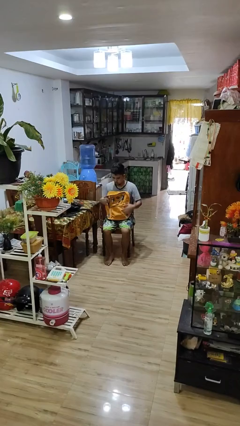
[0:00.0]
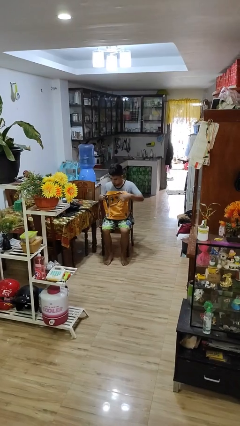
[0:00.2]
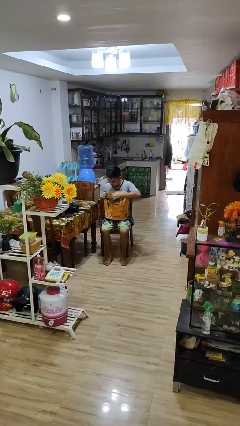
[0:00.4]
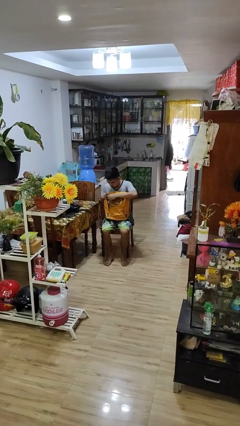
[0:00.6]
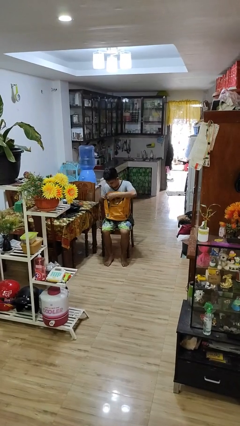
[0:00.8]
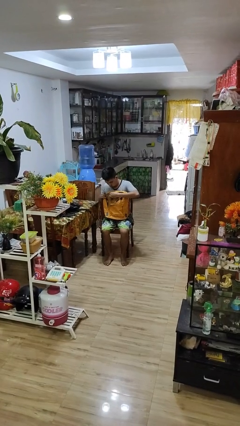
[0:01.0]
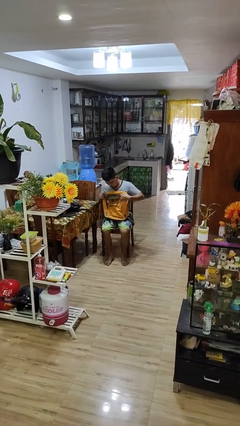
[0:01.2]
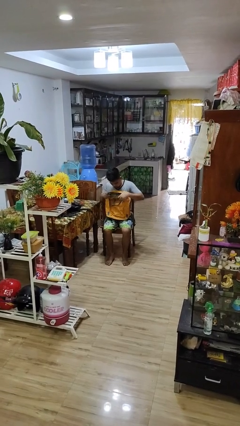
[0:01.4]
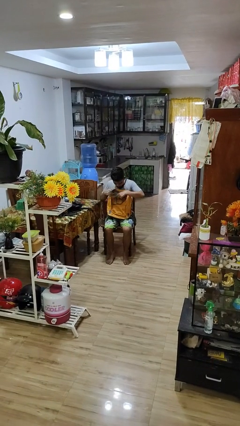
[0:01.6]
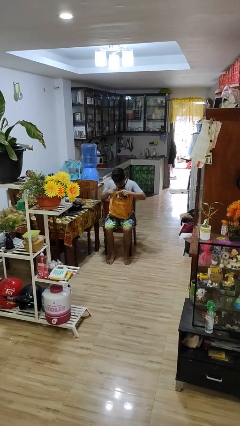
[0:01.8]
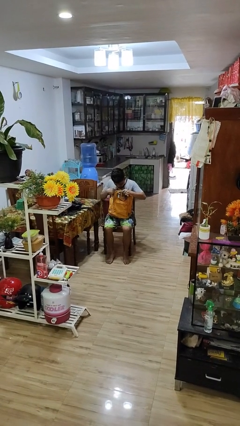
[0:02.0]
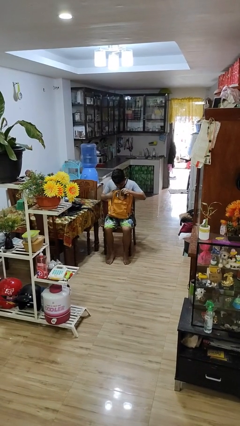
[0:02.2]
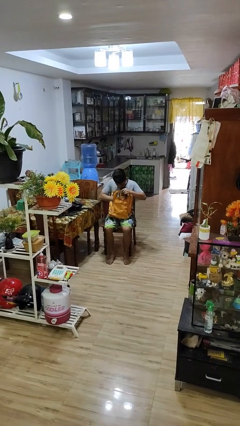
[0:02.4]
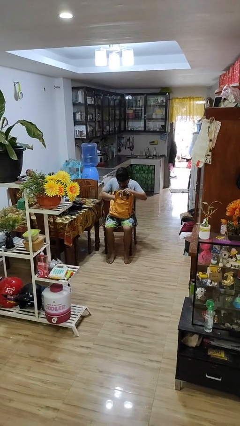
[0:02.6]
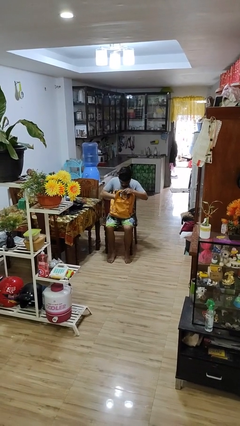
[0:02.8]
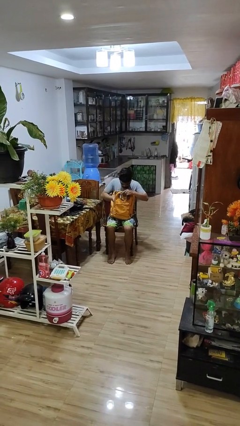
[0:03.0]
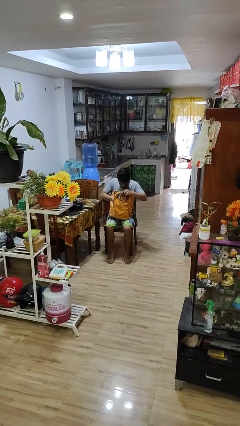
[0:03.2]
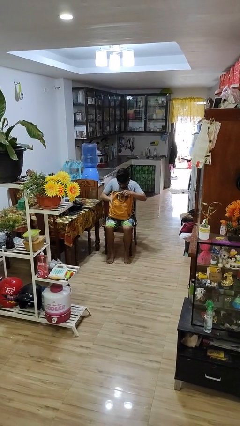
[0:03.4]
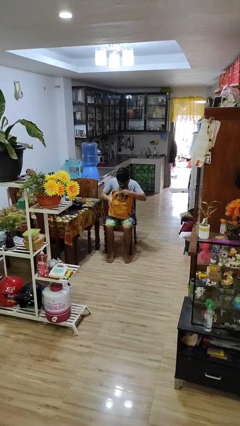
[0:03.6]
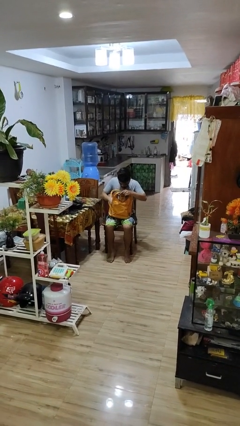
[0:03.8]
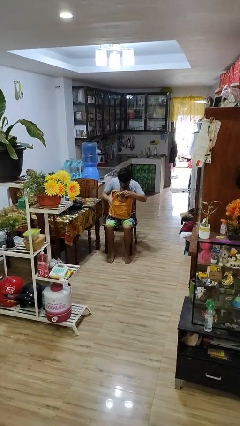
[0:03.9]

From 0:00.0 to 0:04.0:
person searches in backpack

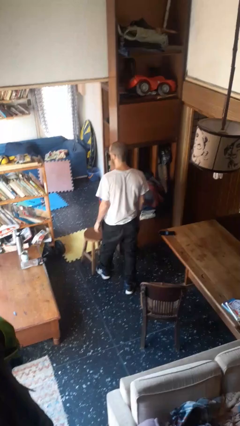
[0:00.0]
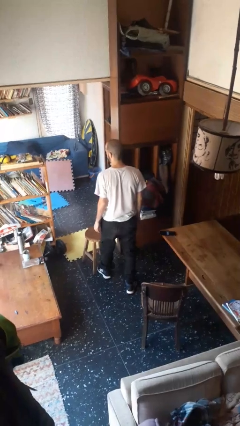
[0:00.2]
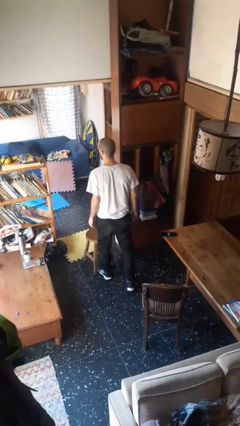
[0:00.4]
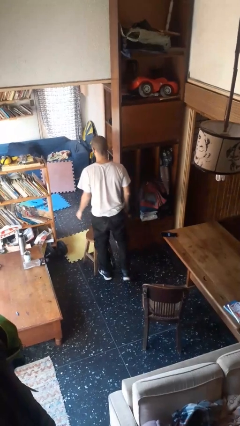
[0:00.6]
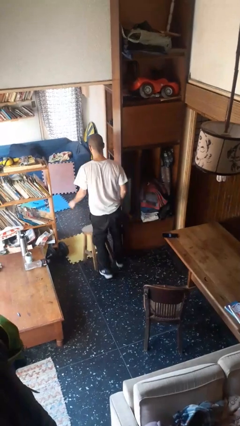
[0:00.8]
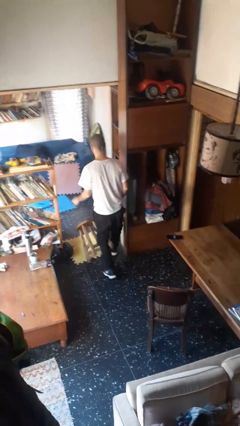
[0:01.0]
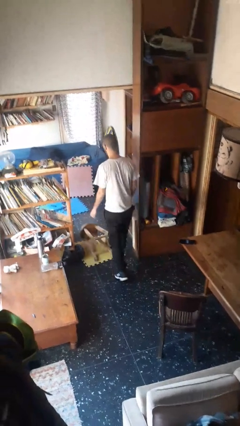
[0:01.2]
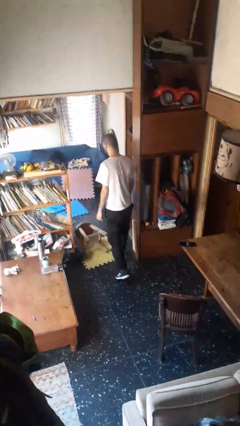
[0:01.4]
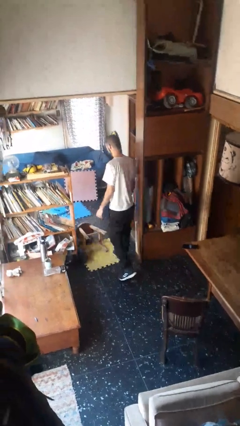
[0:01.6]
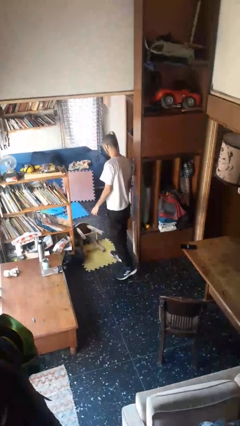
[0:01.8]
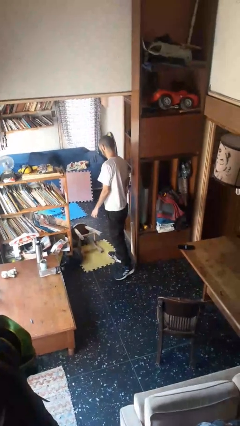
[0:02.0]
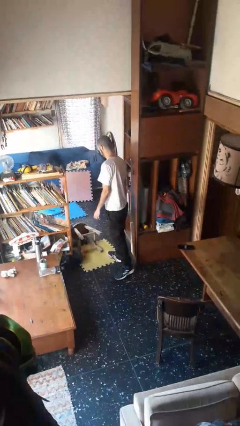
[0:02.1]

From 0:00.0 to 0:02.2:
person knocks over furniture

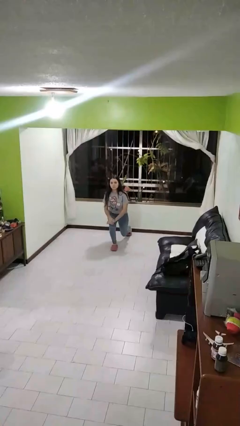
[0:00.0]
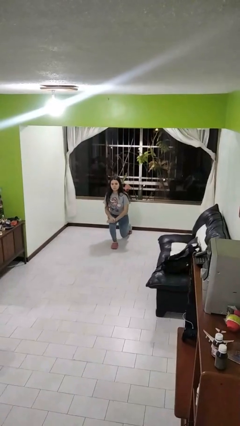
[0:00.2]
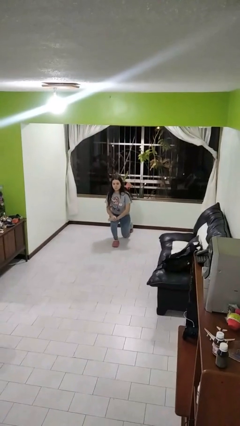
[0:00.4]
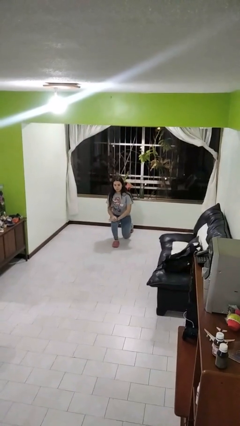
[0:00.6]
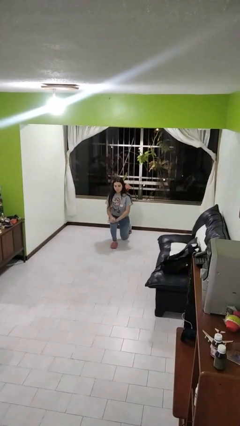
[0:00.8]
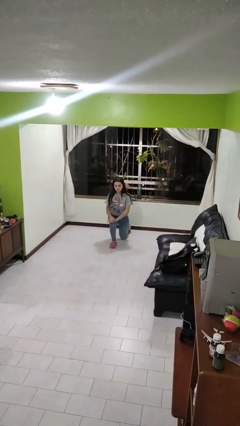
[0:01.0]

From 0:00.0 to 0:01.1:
person kneels

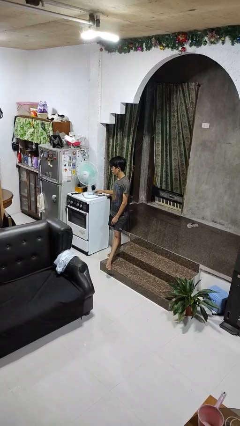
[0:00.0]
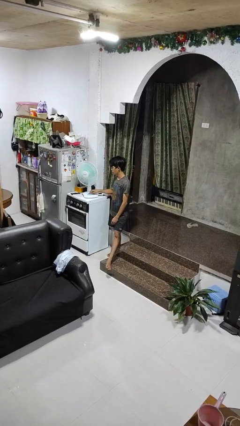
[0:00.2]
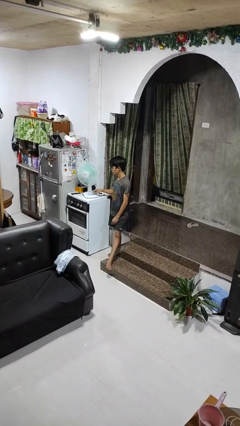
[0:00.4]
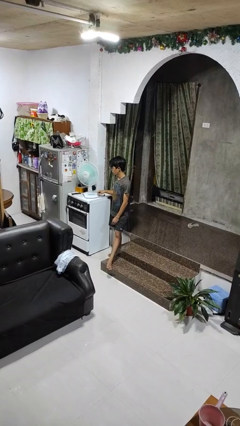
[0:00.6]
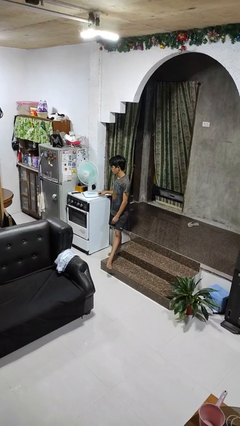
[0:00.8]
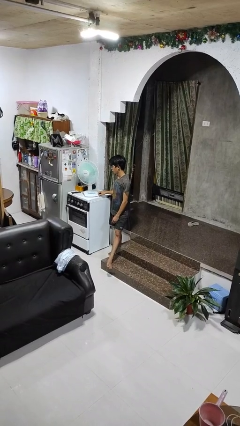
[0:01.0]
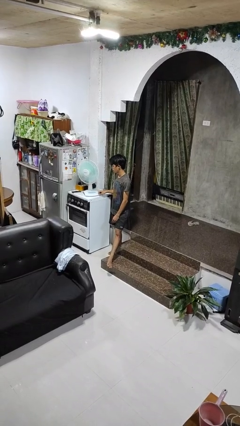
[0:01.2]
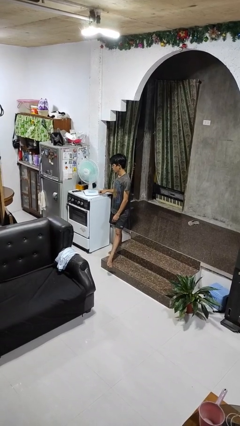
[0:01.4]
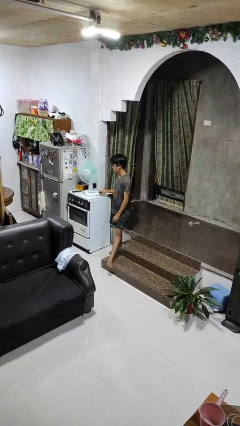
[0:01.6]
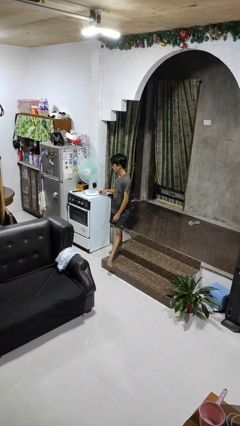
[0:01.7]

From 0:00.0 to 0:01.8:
person turns off fan

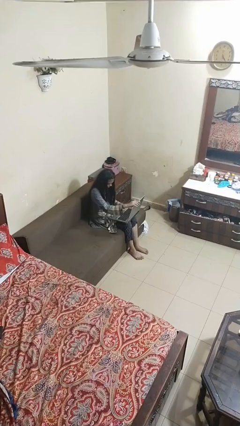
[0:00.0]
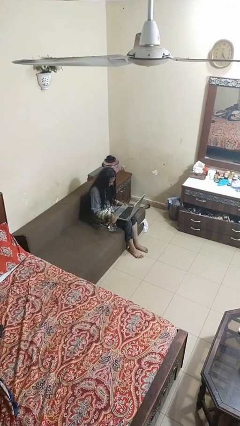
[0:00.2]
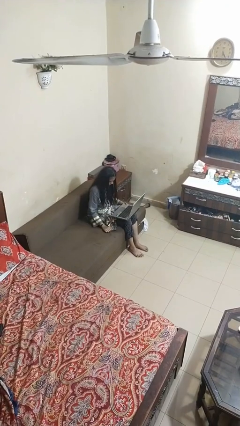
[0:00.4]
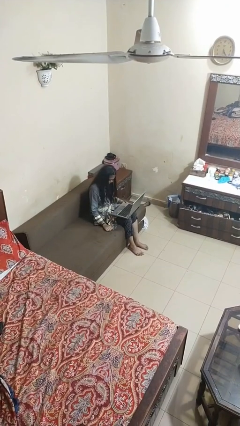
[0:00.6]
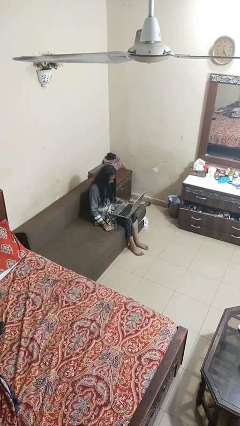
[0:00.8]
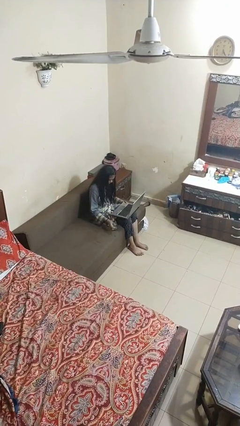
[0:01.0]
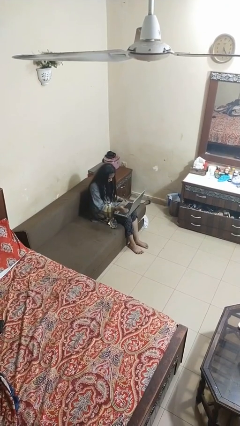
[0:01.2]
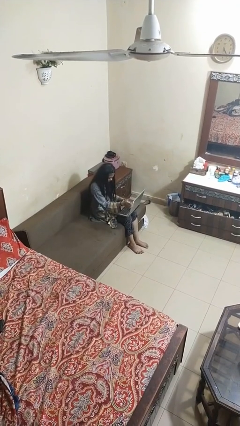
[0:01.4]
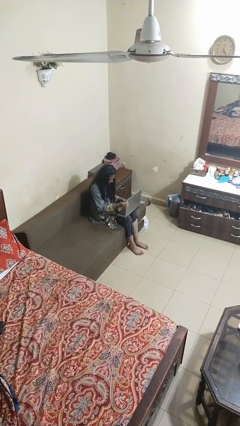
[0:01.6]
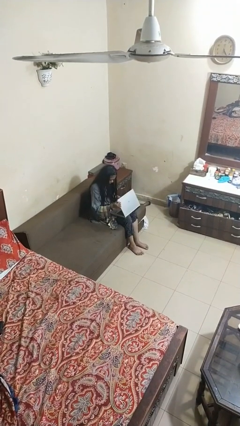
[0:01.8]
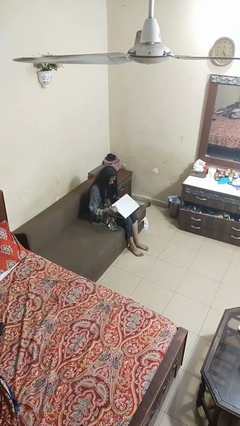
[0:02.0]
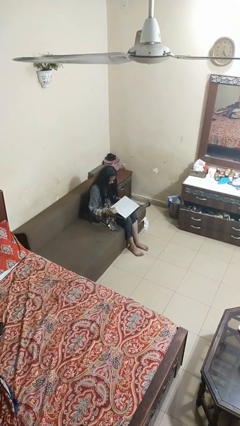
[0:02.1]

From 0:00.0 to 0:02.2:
person closes laptop

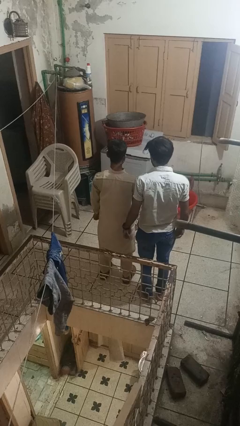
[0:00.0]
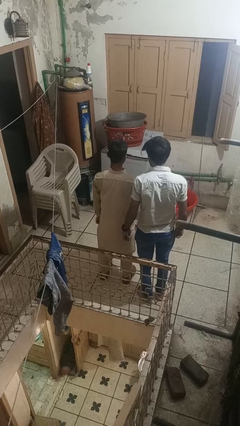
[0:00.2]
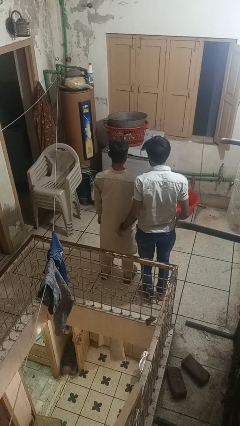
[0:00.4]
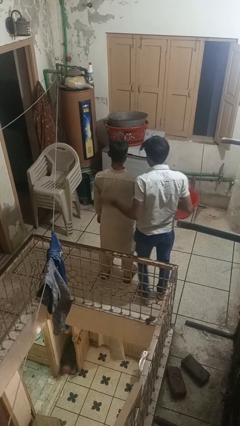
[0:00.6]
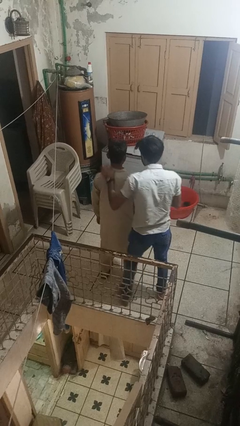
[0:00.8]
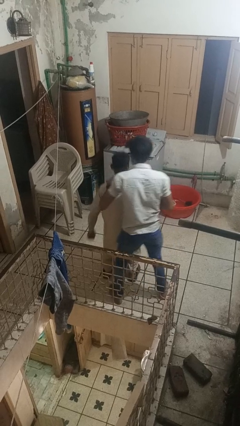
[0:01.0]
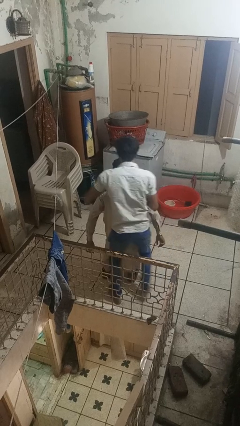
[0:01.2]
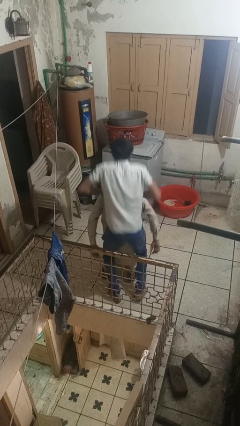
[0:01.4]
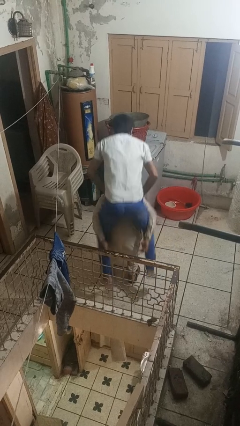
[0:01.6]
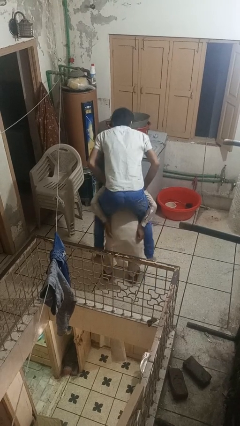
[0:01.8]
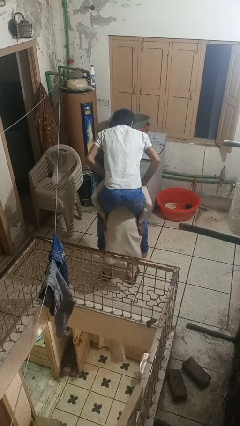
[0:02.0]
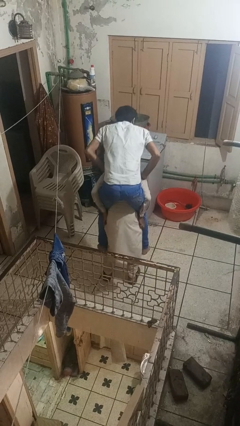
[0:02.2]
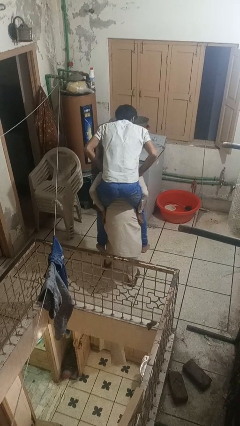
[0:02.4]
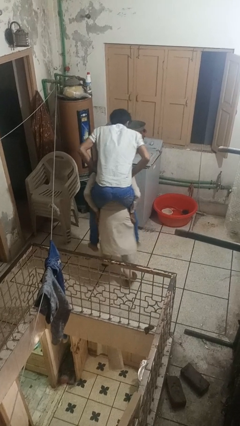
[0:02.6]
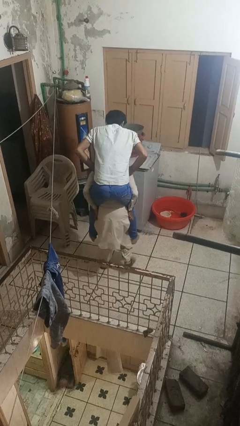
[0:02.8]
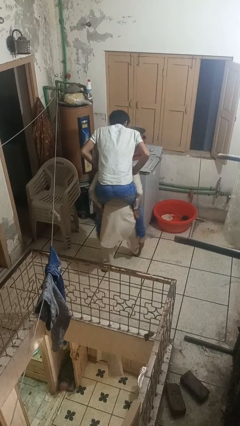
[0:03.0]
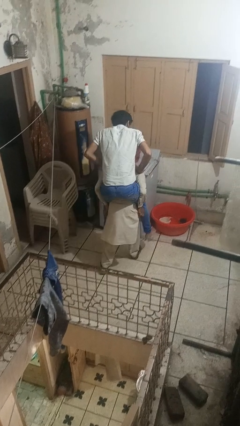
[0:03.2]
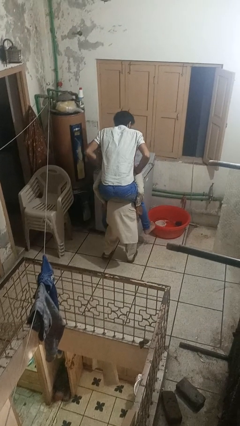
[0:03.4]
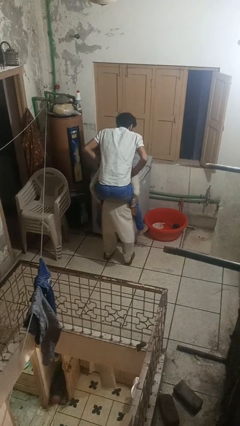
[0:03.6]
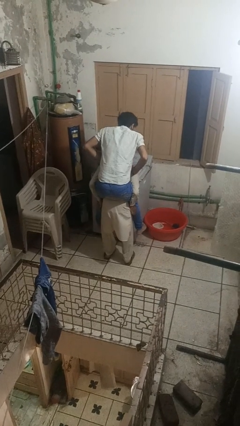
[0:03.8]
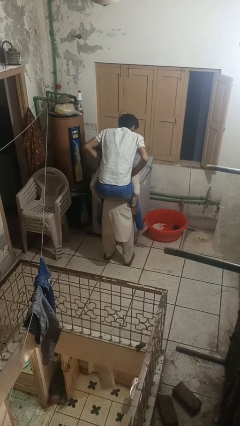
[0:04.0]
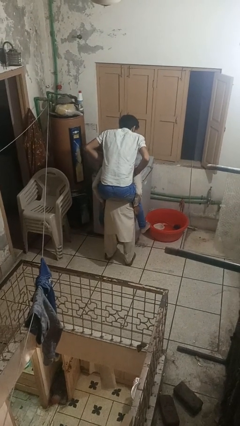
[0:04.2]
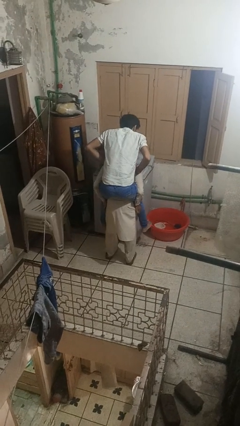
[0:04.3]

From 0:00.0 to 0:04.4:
person carries person on back

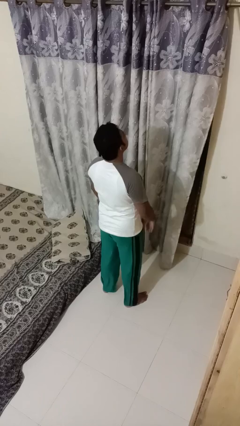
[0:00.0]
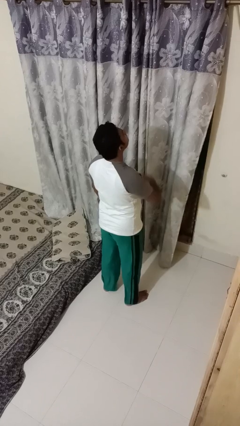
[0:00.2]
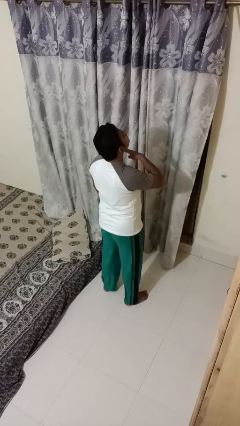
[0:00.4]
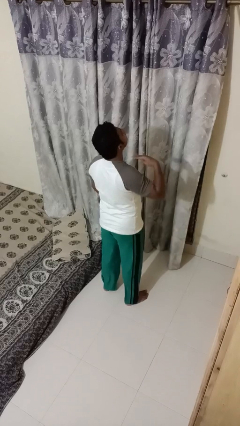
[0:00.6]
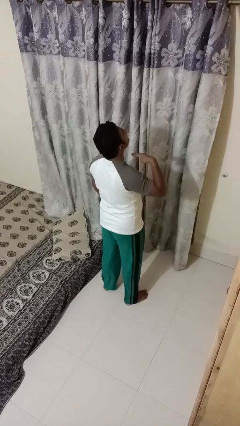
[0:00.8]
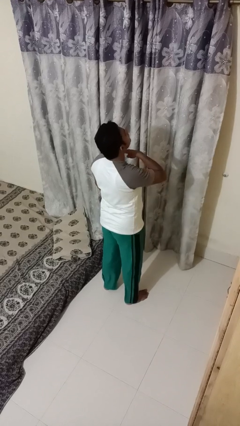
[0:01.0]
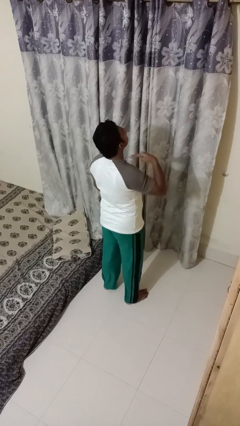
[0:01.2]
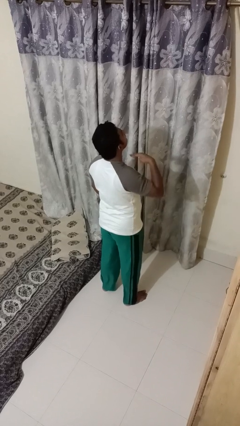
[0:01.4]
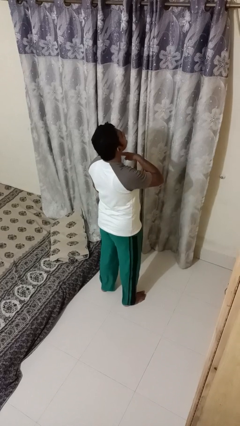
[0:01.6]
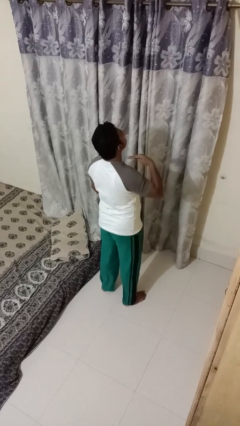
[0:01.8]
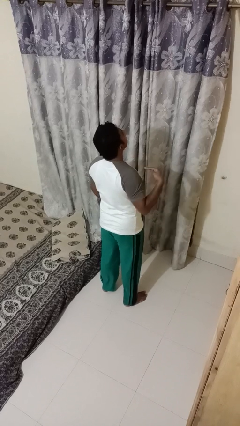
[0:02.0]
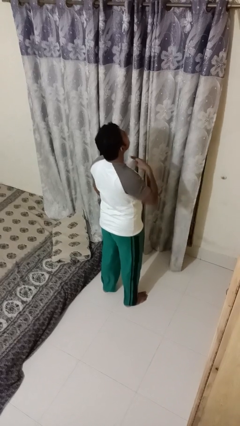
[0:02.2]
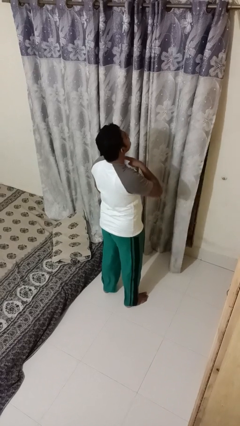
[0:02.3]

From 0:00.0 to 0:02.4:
person gestures cut
